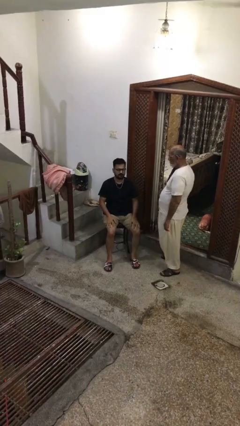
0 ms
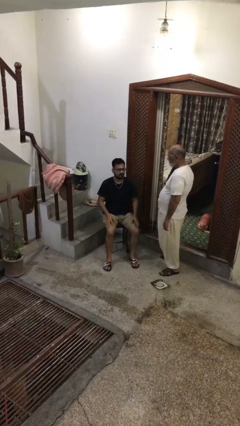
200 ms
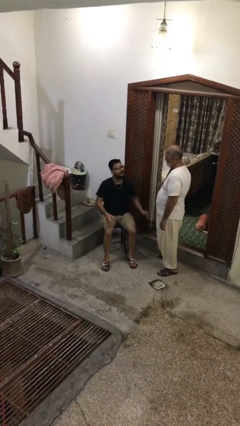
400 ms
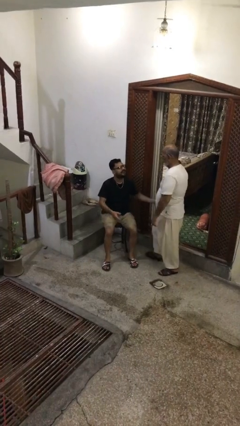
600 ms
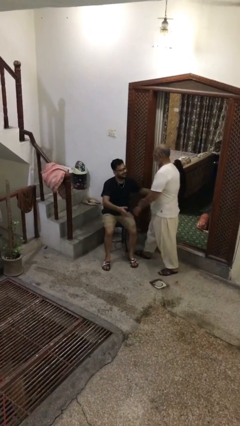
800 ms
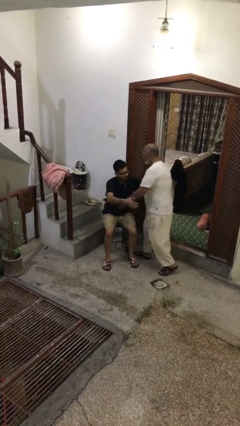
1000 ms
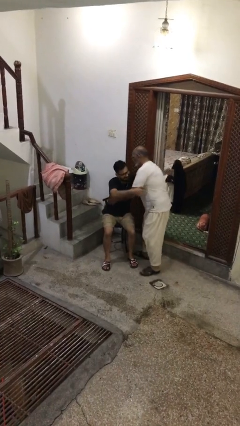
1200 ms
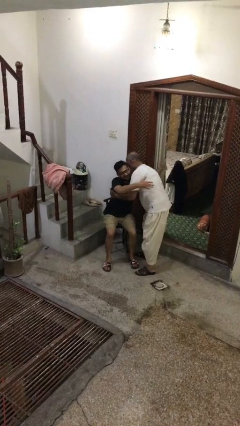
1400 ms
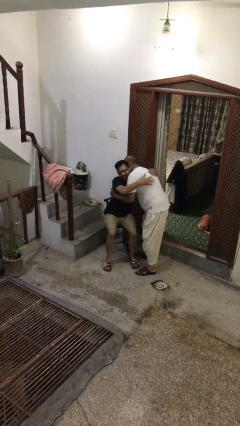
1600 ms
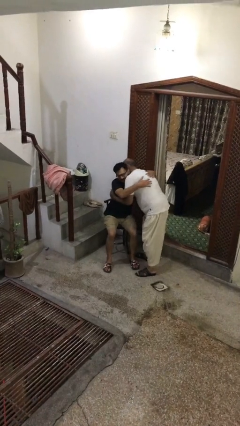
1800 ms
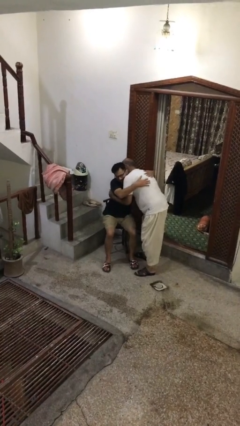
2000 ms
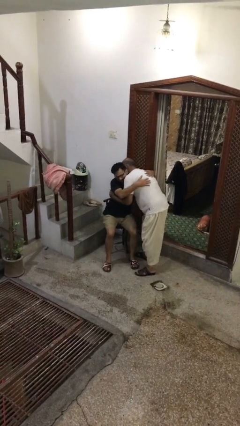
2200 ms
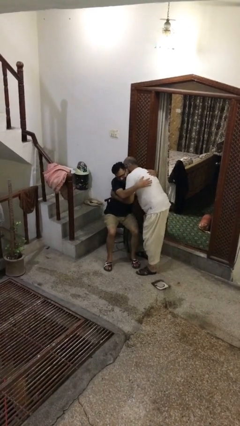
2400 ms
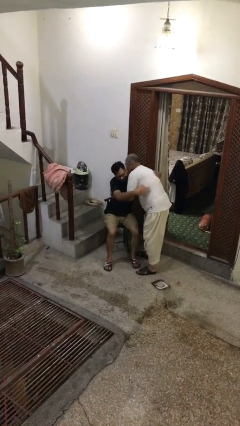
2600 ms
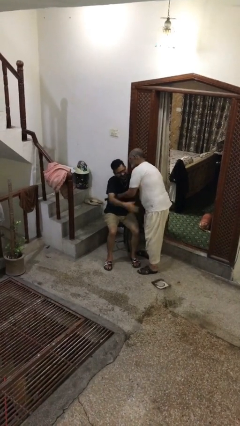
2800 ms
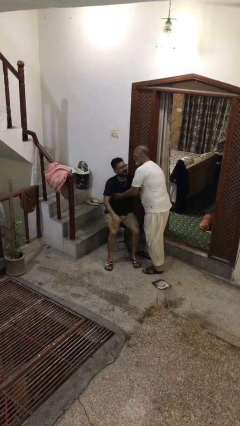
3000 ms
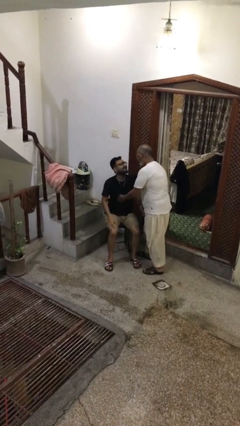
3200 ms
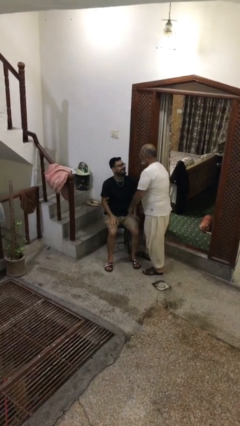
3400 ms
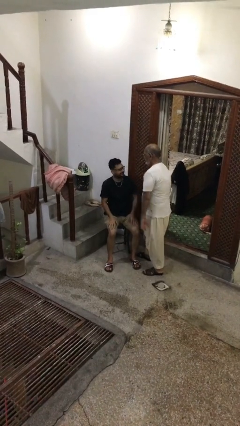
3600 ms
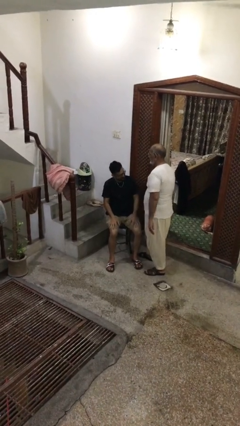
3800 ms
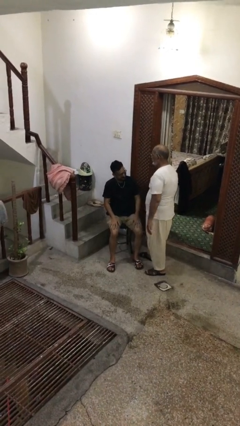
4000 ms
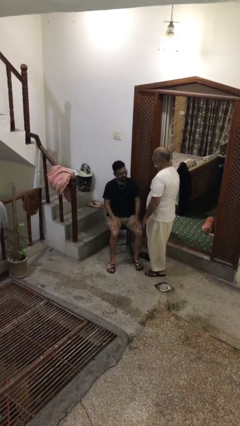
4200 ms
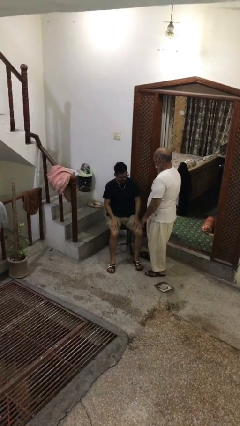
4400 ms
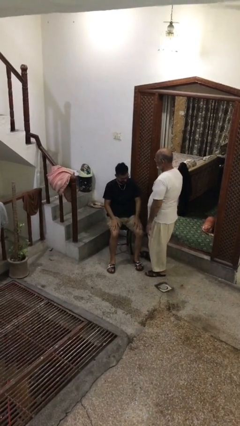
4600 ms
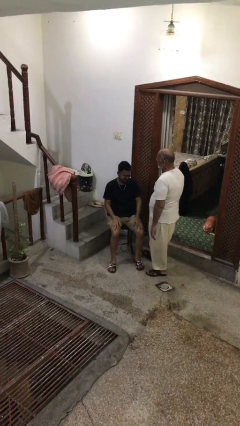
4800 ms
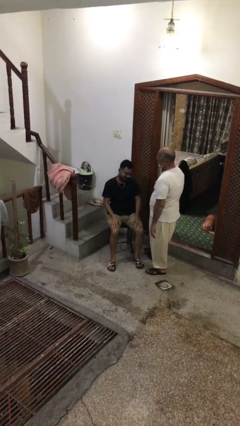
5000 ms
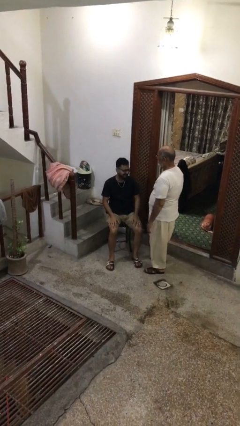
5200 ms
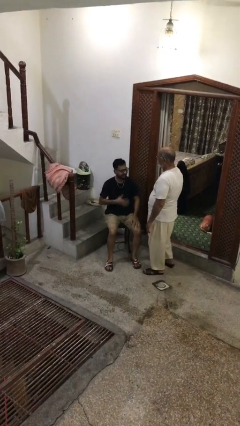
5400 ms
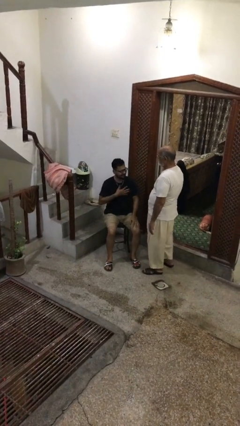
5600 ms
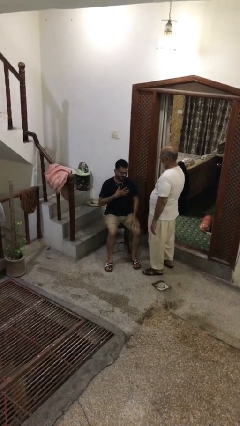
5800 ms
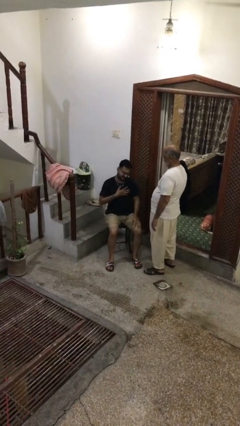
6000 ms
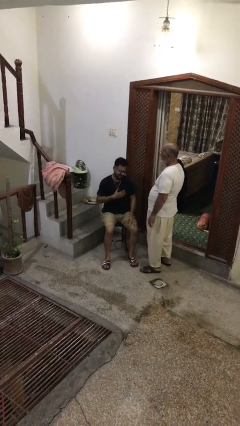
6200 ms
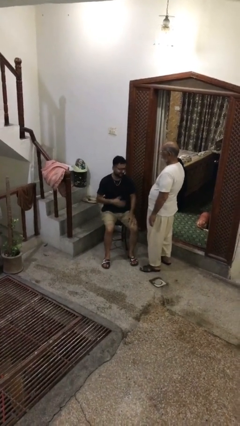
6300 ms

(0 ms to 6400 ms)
person embraces person

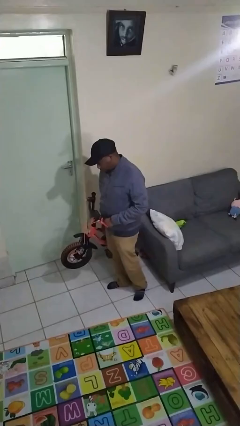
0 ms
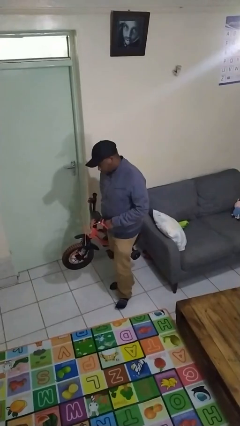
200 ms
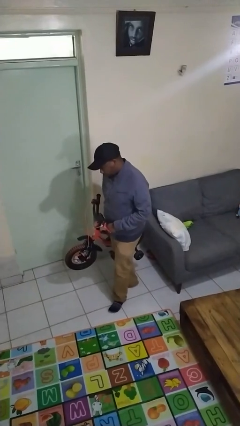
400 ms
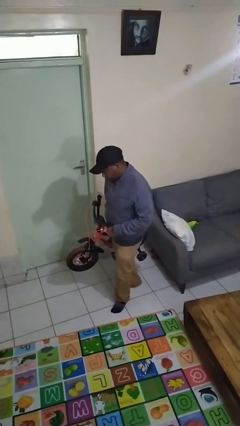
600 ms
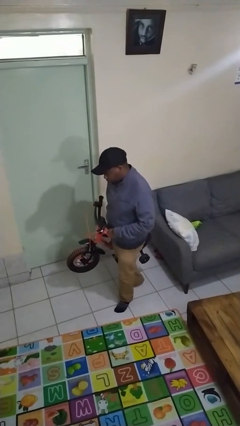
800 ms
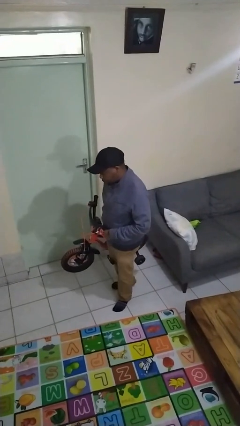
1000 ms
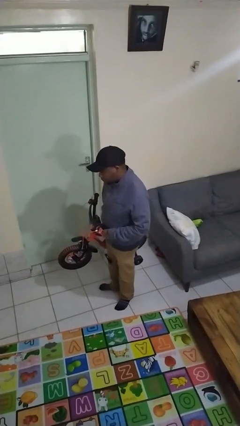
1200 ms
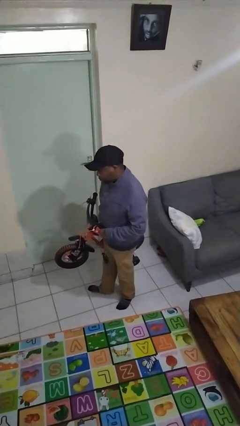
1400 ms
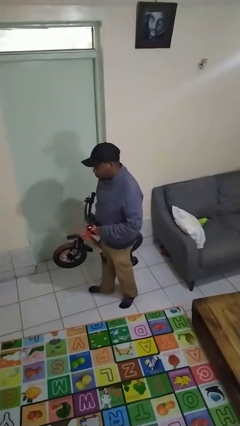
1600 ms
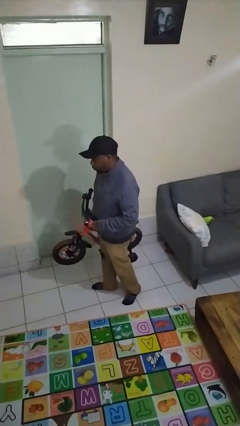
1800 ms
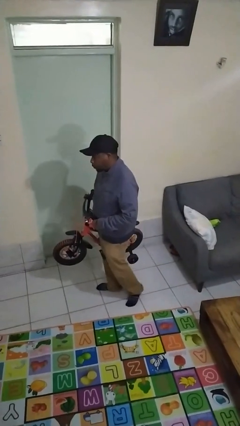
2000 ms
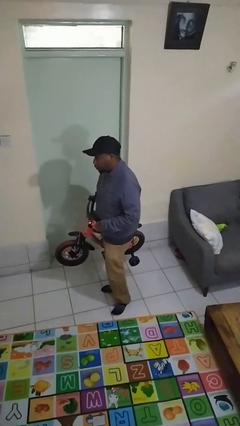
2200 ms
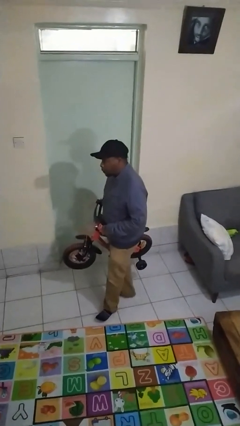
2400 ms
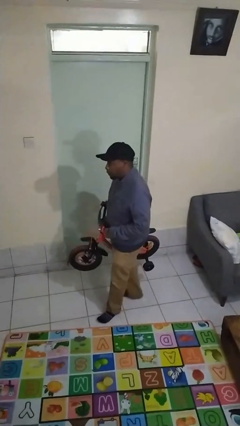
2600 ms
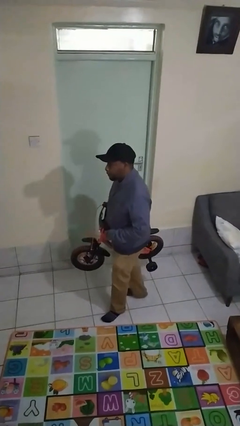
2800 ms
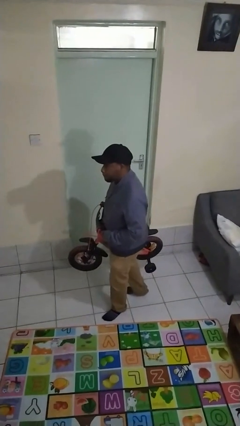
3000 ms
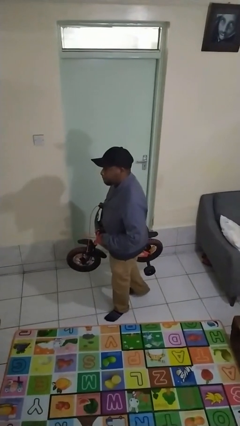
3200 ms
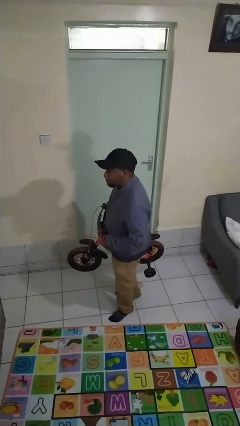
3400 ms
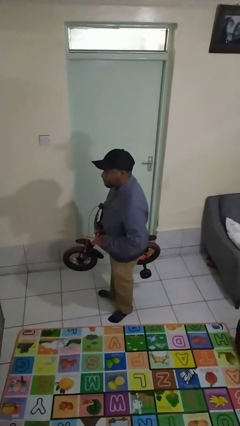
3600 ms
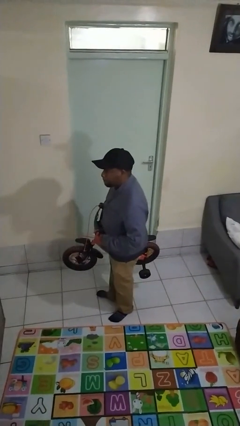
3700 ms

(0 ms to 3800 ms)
person carries bicycle

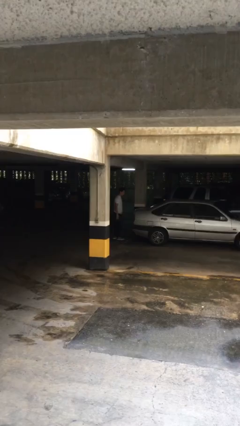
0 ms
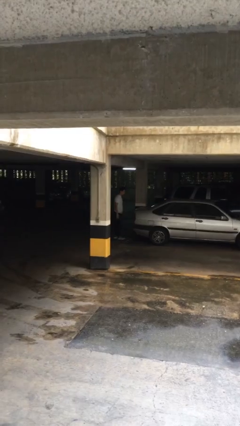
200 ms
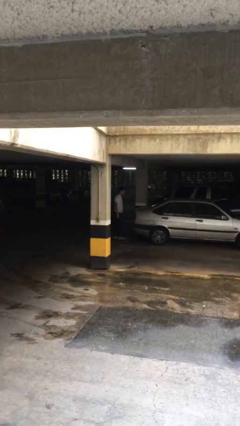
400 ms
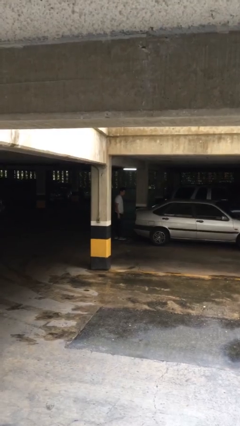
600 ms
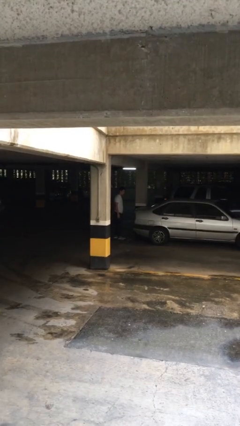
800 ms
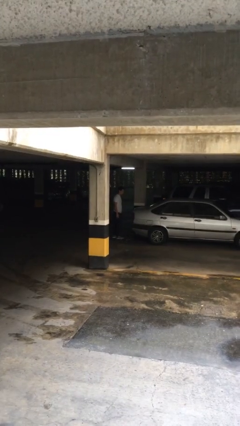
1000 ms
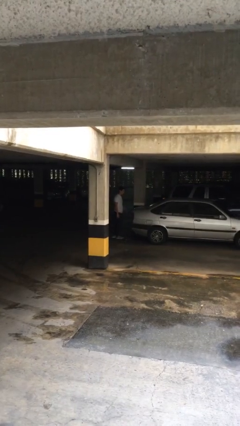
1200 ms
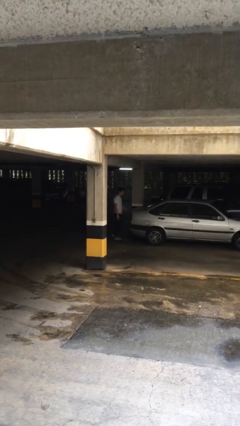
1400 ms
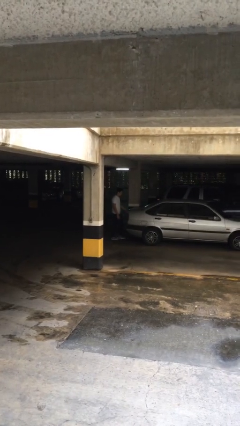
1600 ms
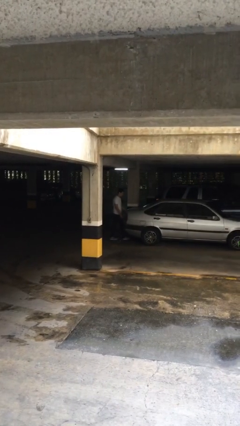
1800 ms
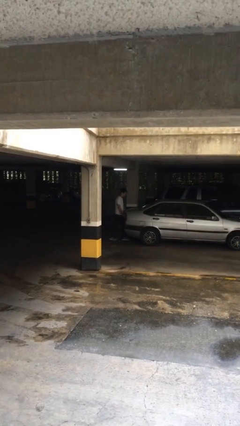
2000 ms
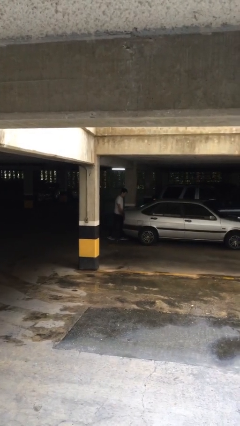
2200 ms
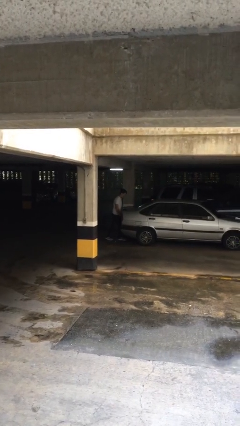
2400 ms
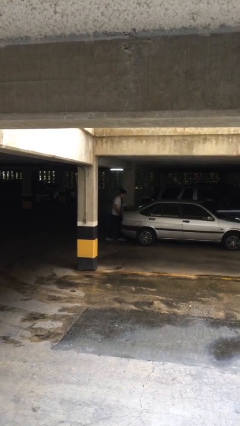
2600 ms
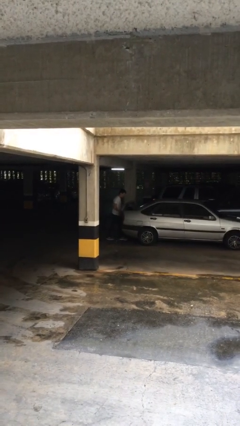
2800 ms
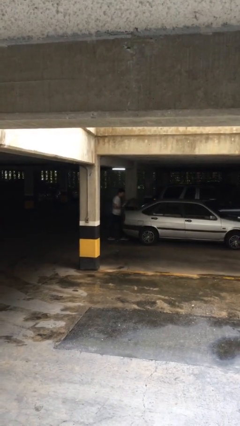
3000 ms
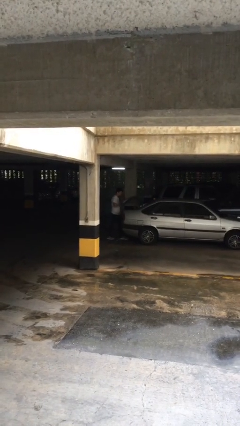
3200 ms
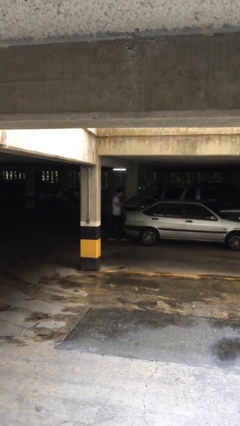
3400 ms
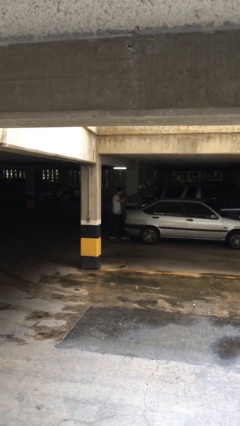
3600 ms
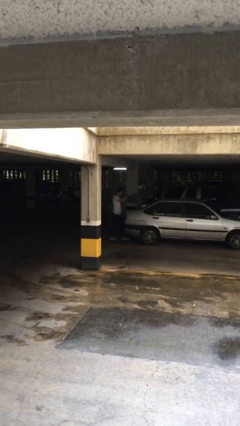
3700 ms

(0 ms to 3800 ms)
person opens car trunk

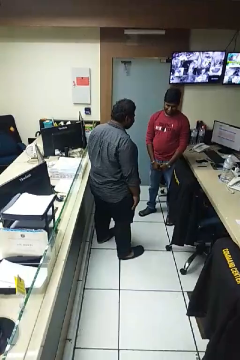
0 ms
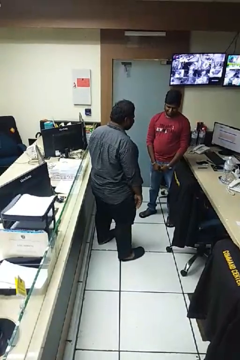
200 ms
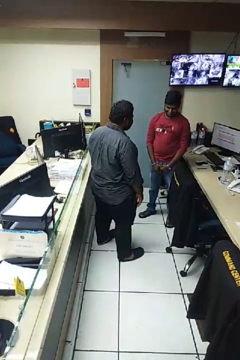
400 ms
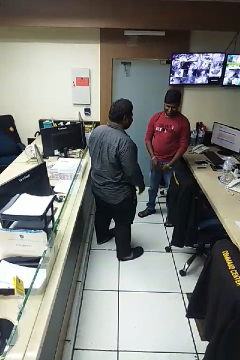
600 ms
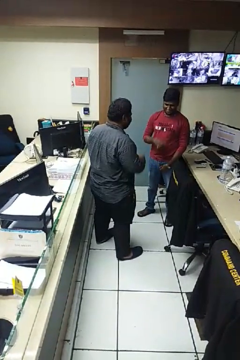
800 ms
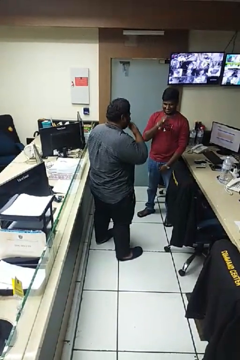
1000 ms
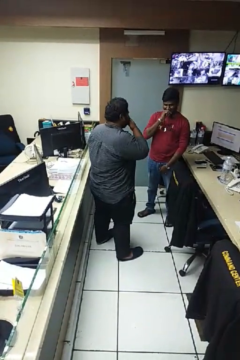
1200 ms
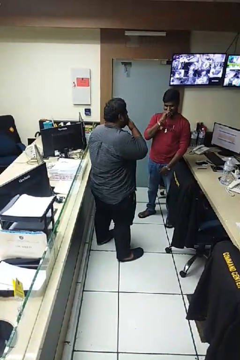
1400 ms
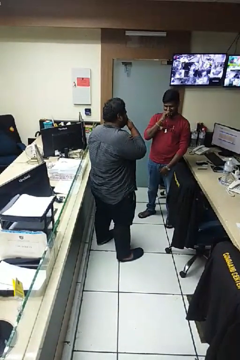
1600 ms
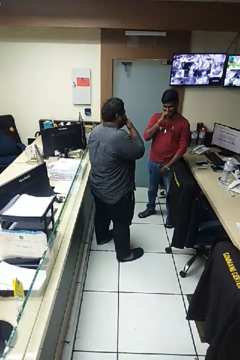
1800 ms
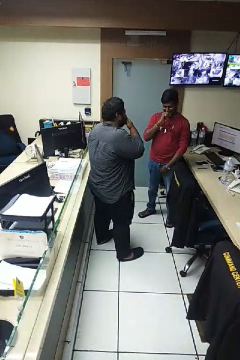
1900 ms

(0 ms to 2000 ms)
person laughs with person

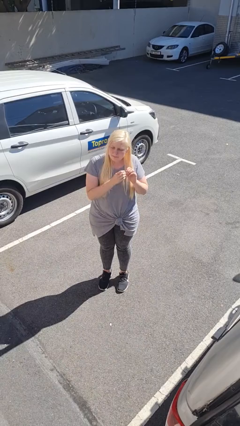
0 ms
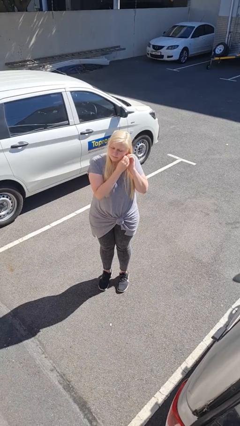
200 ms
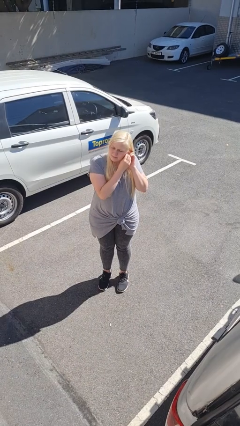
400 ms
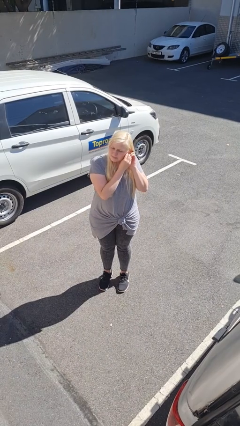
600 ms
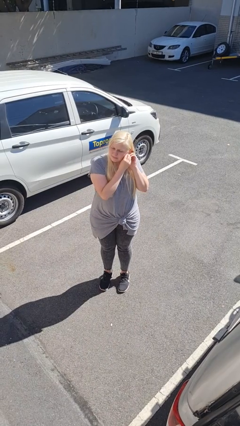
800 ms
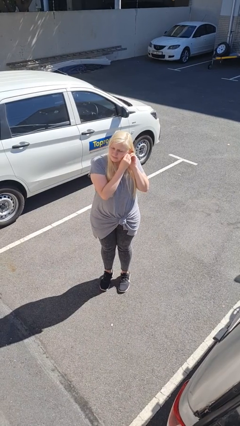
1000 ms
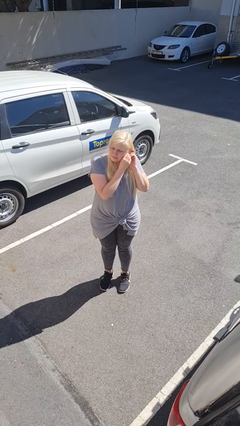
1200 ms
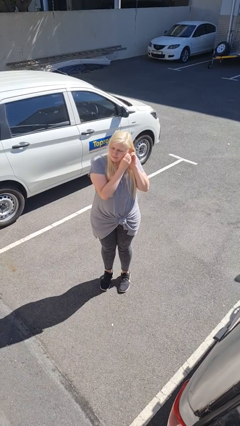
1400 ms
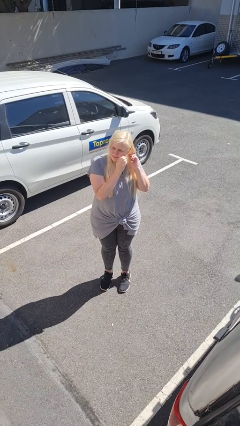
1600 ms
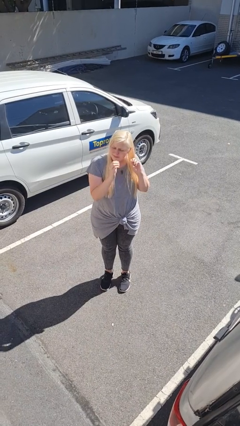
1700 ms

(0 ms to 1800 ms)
person takes off earrings

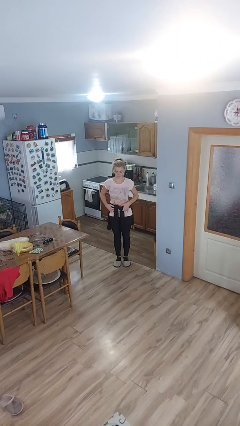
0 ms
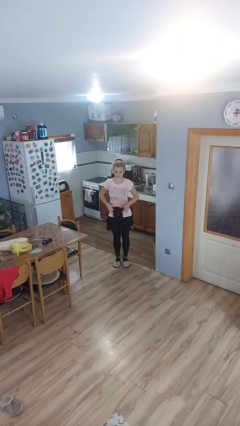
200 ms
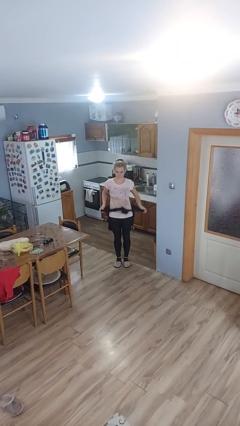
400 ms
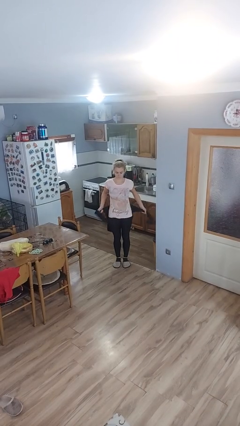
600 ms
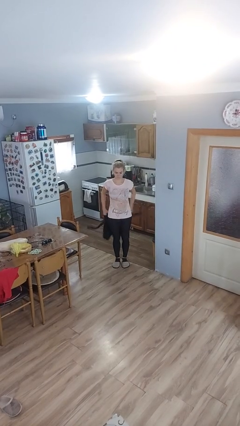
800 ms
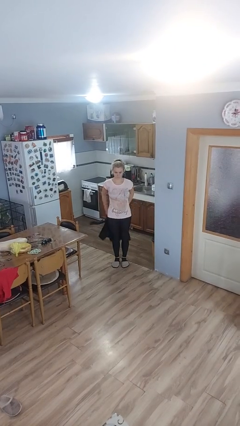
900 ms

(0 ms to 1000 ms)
person unties jacket around waist
